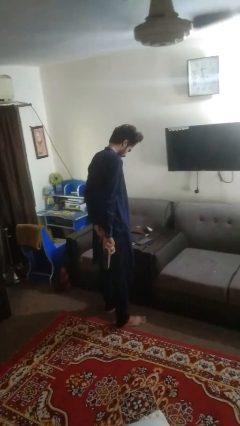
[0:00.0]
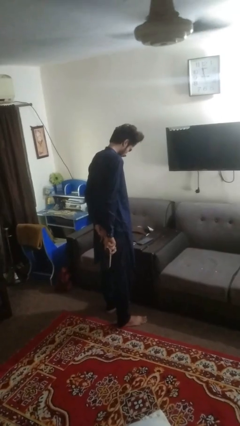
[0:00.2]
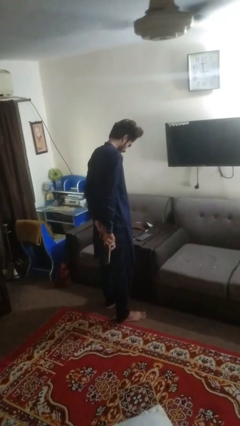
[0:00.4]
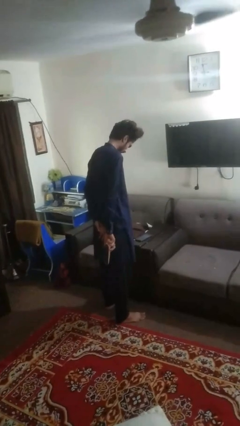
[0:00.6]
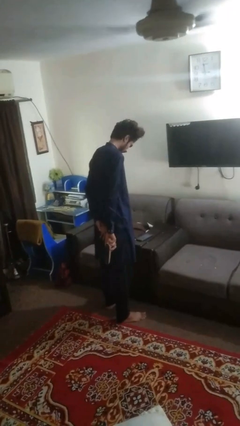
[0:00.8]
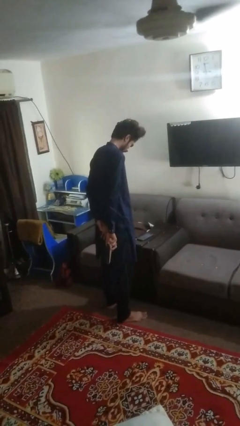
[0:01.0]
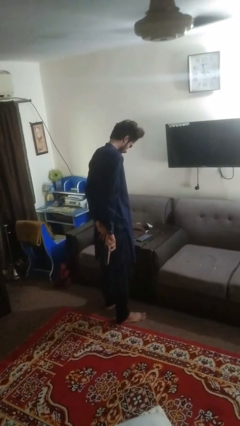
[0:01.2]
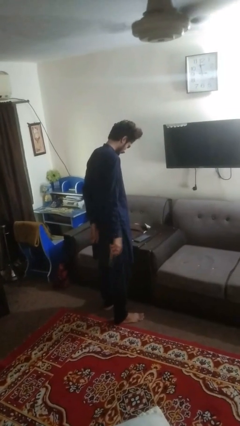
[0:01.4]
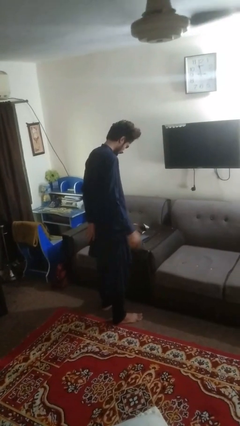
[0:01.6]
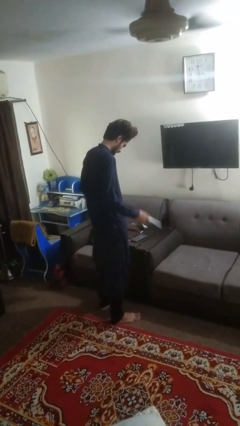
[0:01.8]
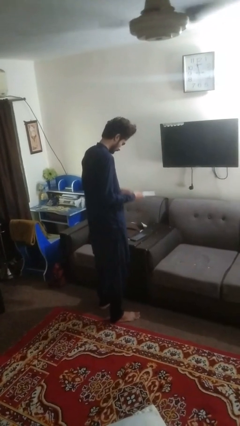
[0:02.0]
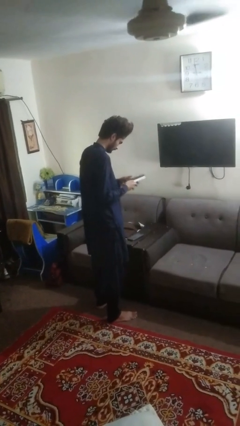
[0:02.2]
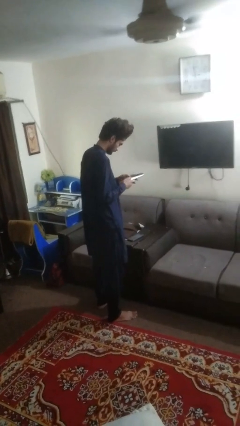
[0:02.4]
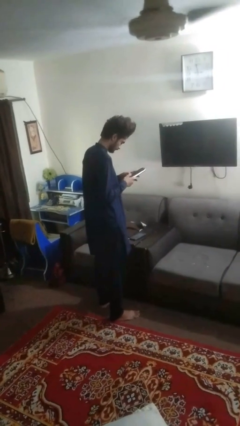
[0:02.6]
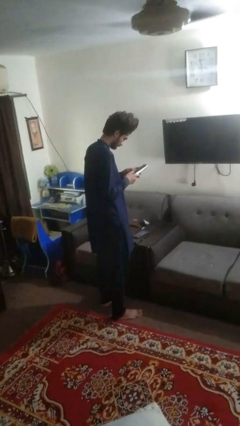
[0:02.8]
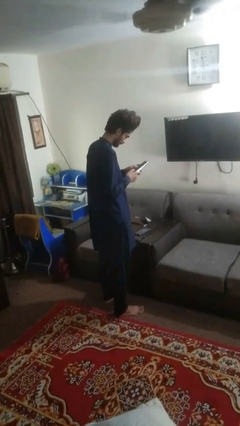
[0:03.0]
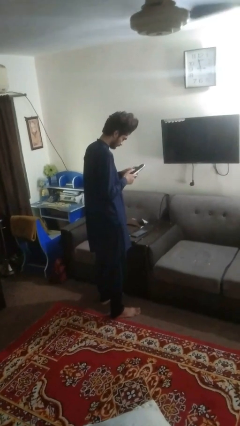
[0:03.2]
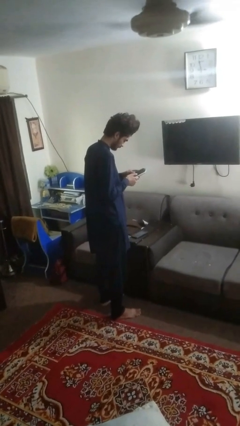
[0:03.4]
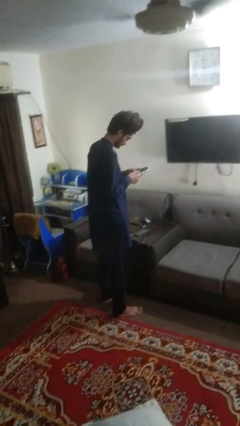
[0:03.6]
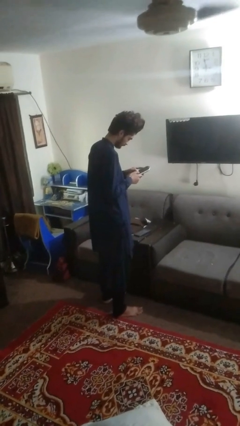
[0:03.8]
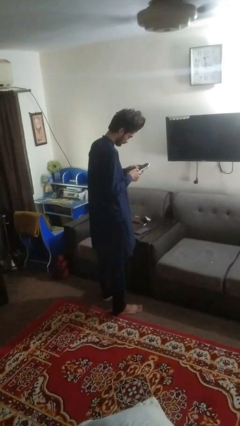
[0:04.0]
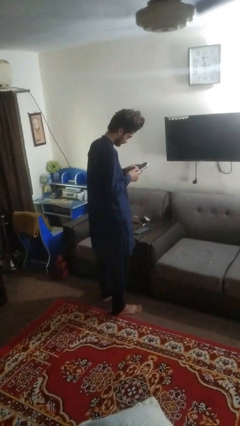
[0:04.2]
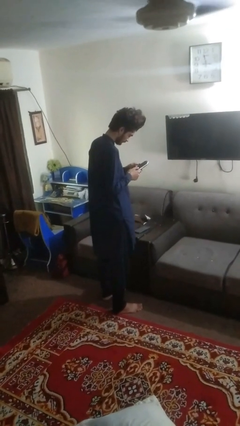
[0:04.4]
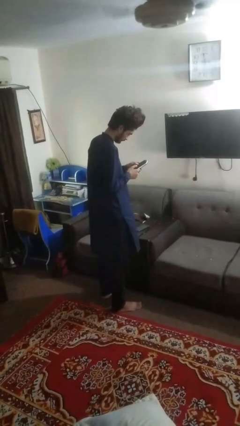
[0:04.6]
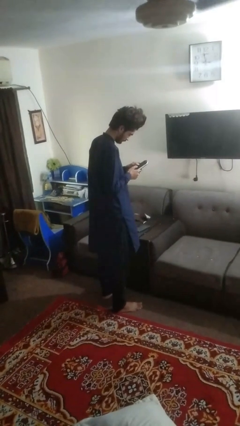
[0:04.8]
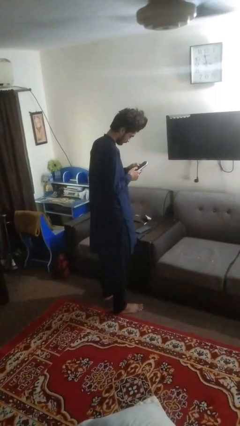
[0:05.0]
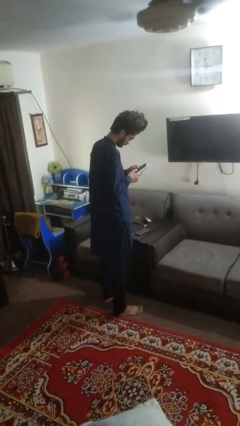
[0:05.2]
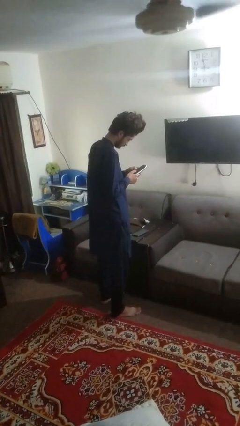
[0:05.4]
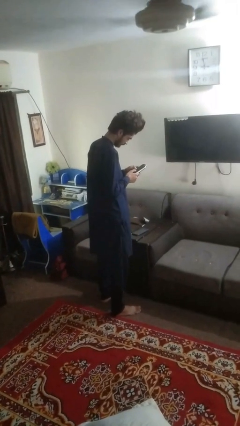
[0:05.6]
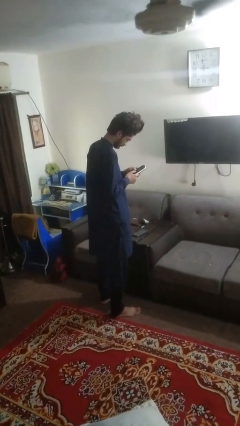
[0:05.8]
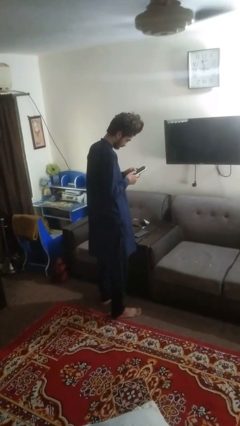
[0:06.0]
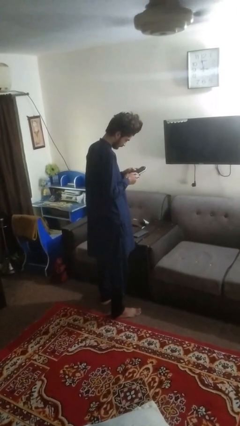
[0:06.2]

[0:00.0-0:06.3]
person uses television remote

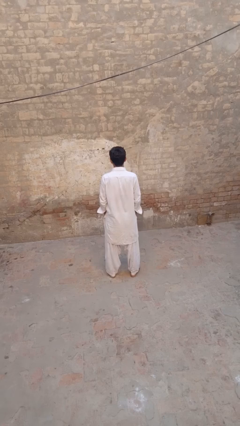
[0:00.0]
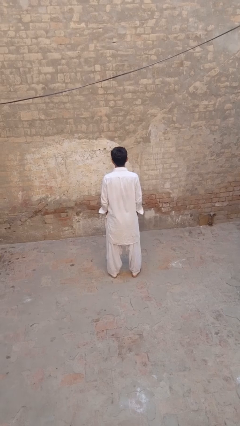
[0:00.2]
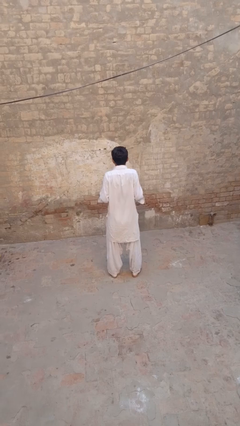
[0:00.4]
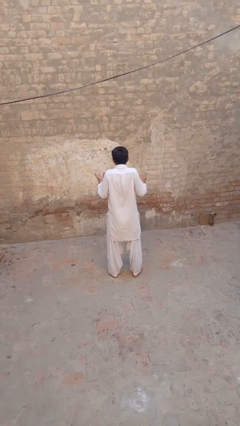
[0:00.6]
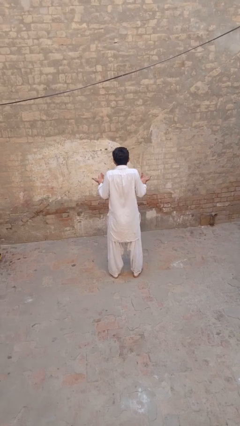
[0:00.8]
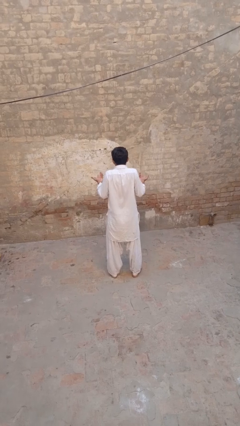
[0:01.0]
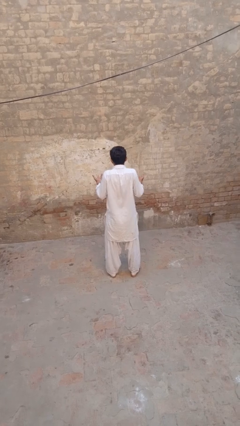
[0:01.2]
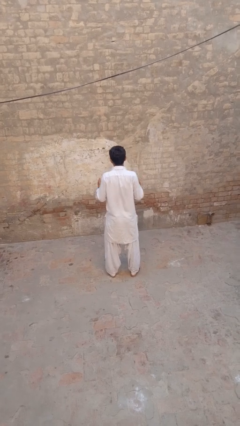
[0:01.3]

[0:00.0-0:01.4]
person shrugs

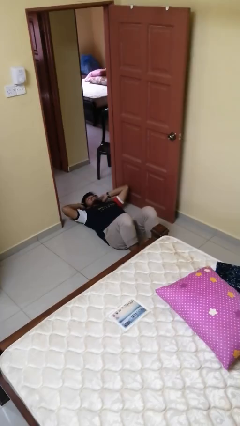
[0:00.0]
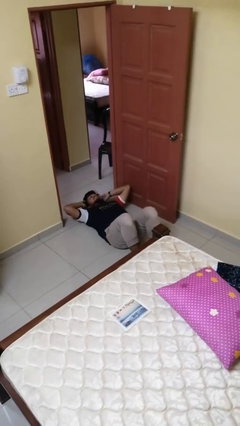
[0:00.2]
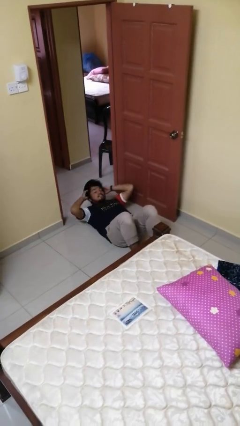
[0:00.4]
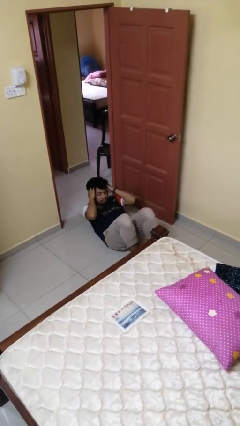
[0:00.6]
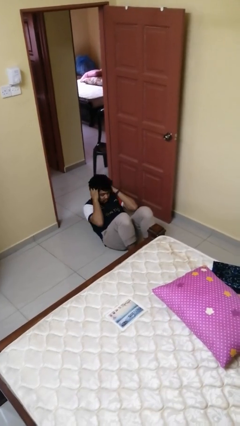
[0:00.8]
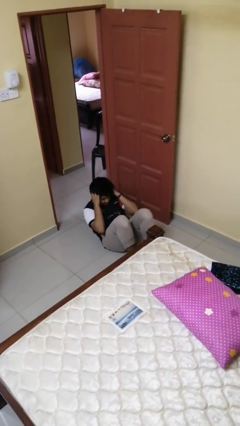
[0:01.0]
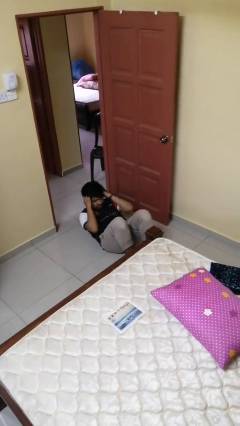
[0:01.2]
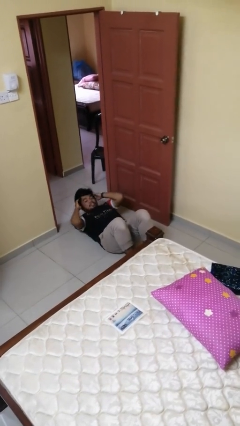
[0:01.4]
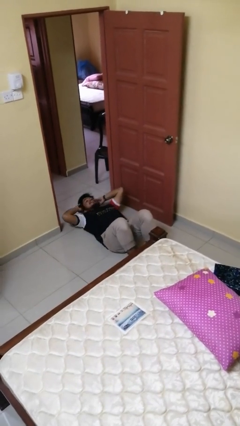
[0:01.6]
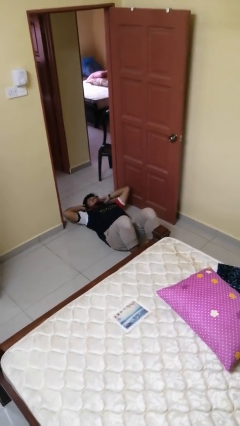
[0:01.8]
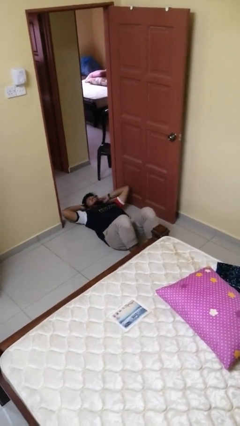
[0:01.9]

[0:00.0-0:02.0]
person exercises with situp

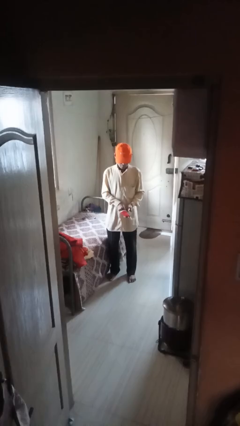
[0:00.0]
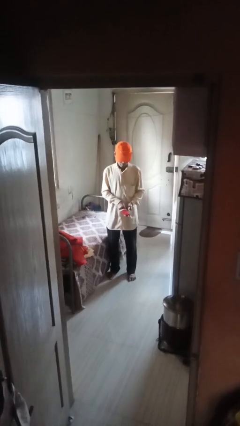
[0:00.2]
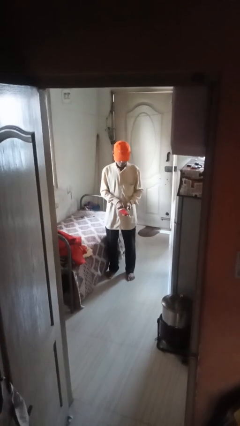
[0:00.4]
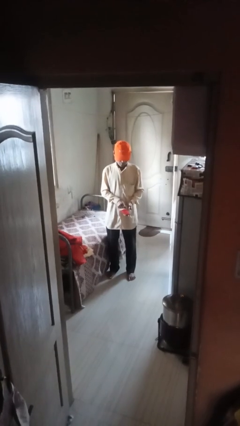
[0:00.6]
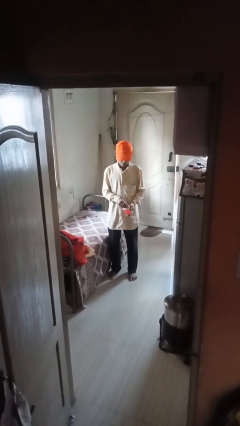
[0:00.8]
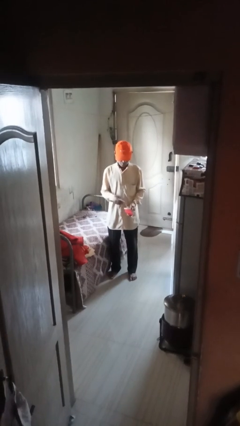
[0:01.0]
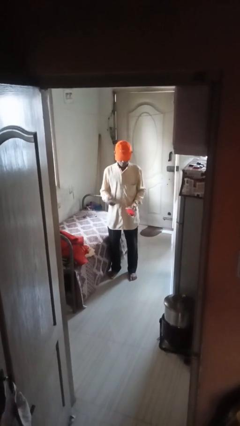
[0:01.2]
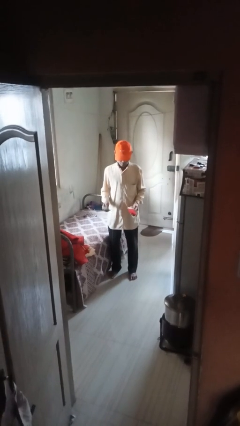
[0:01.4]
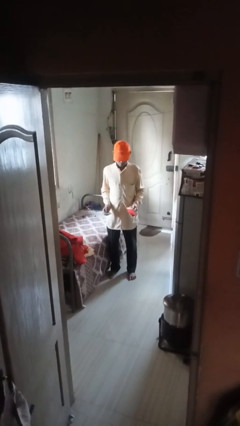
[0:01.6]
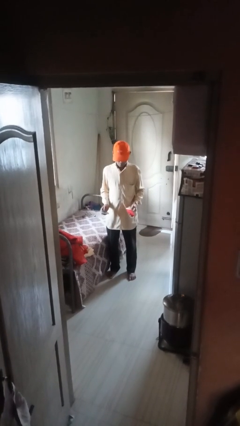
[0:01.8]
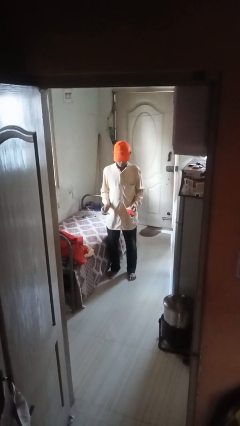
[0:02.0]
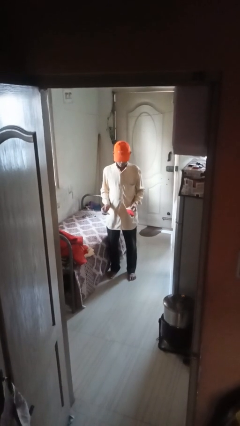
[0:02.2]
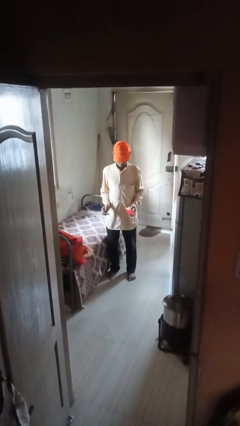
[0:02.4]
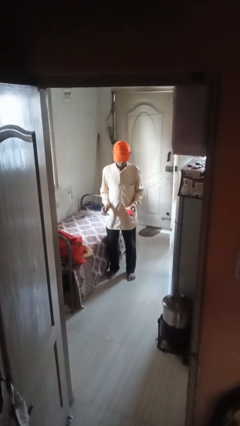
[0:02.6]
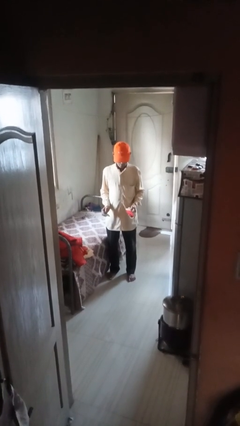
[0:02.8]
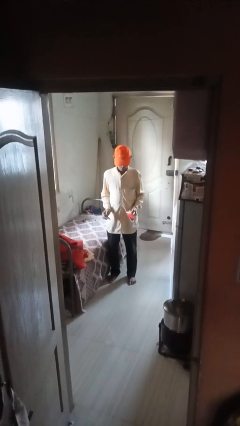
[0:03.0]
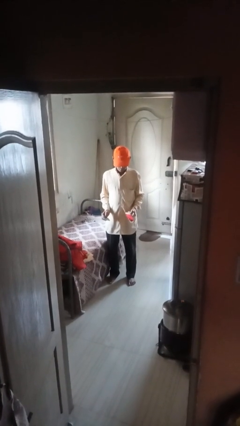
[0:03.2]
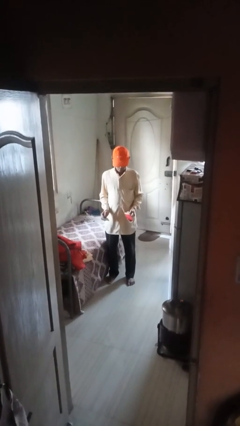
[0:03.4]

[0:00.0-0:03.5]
person takes object from purse

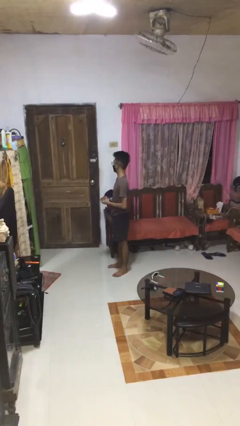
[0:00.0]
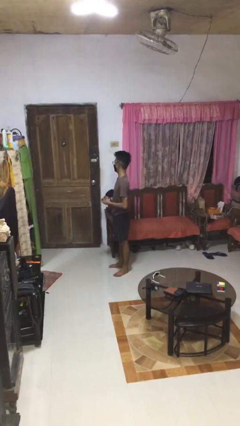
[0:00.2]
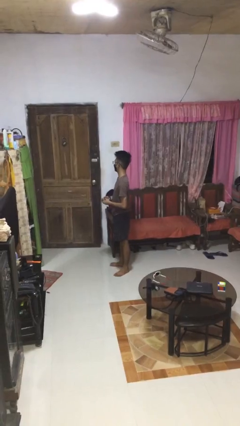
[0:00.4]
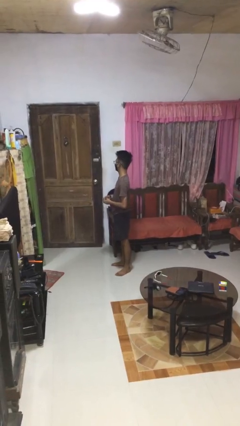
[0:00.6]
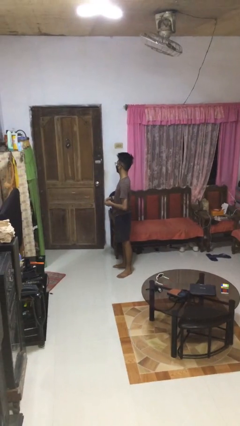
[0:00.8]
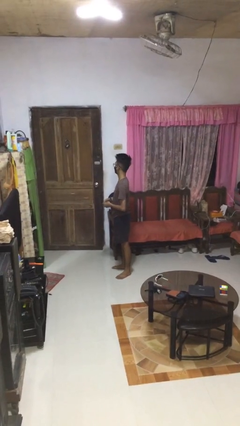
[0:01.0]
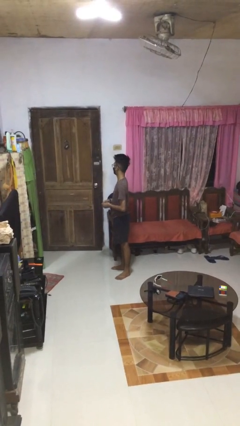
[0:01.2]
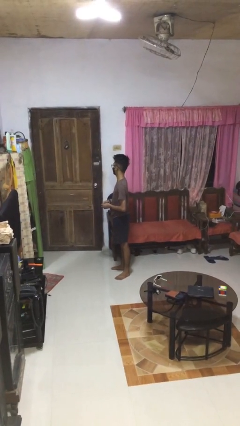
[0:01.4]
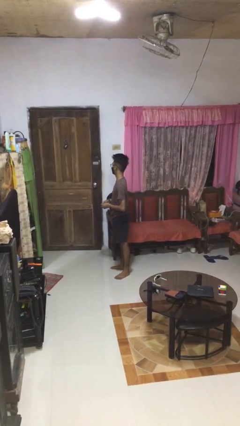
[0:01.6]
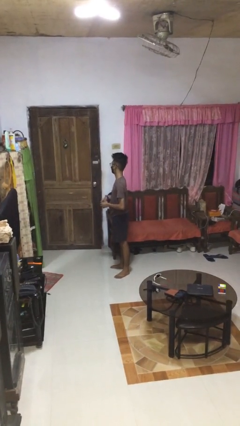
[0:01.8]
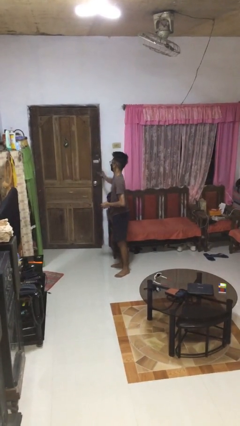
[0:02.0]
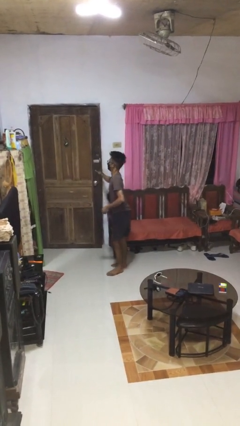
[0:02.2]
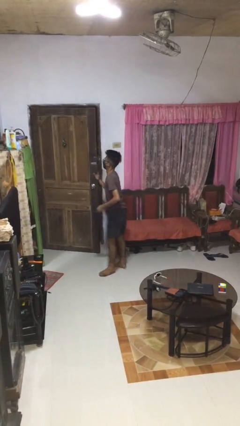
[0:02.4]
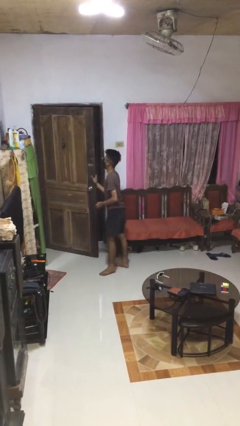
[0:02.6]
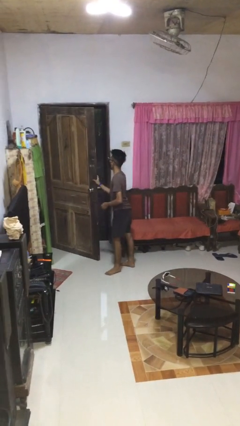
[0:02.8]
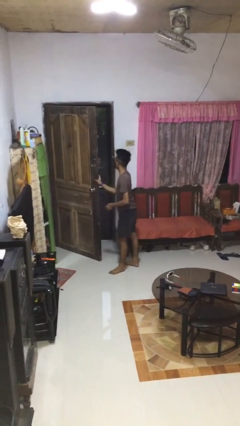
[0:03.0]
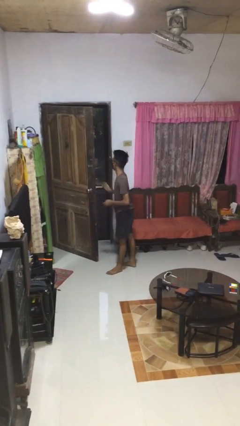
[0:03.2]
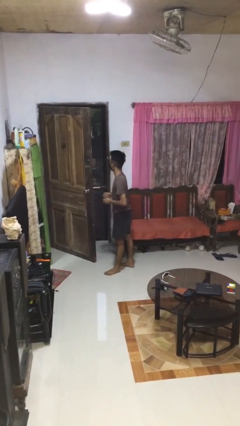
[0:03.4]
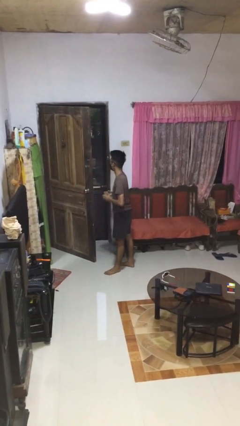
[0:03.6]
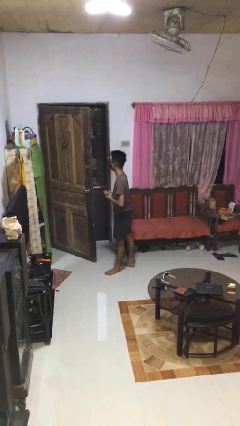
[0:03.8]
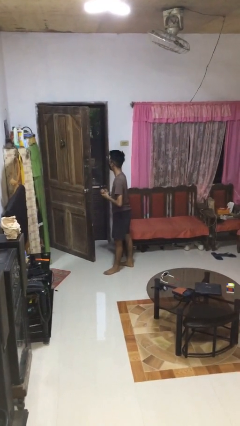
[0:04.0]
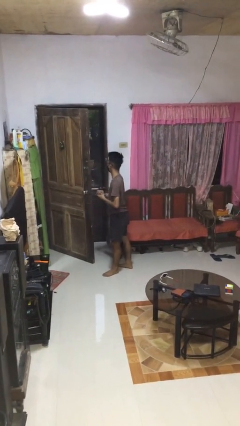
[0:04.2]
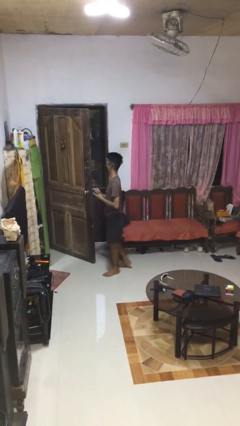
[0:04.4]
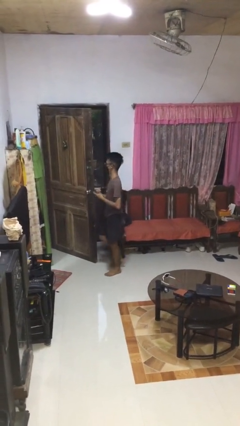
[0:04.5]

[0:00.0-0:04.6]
person opens facility door
